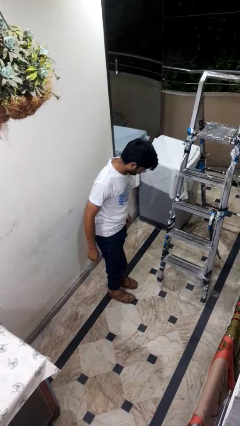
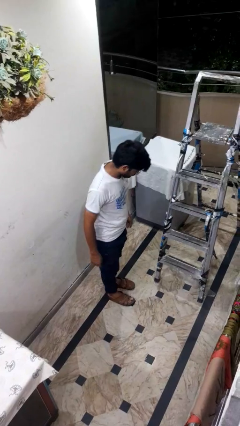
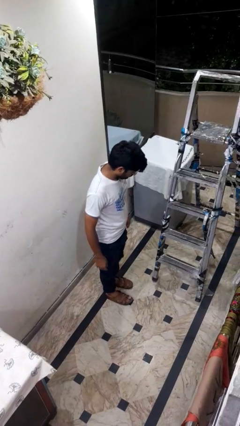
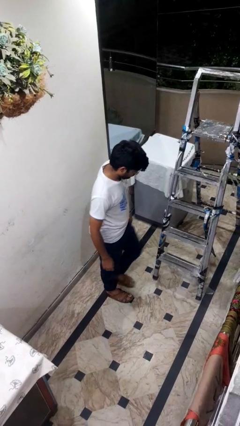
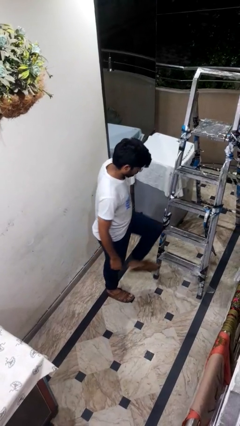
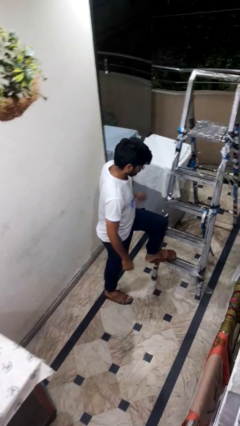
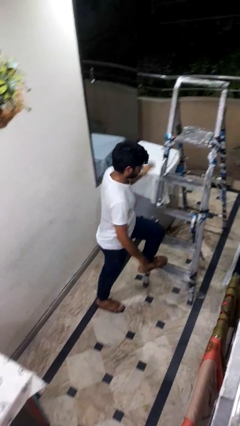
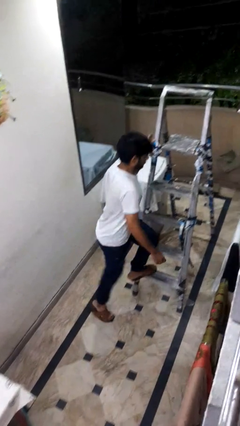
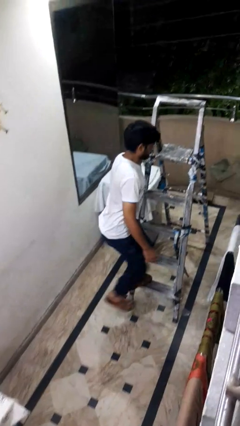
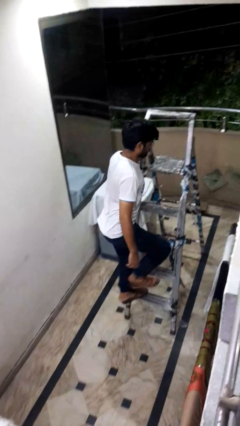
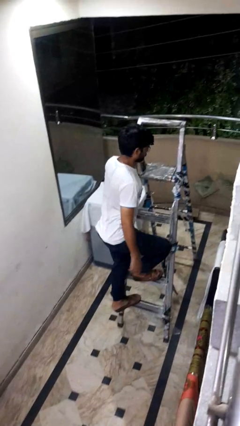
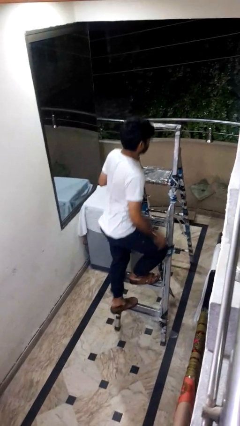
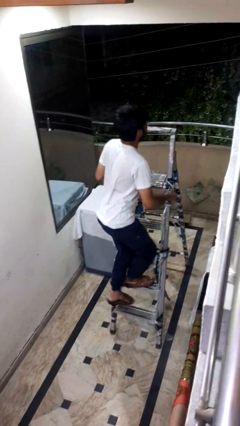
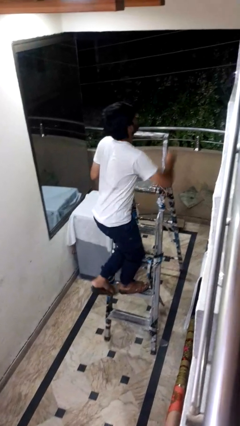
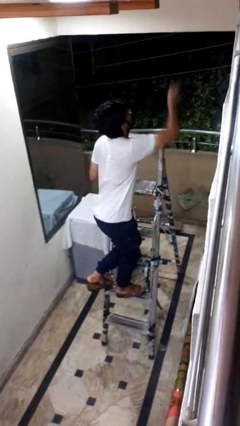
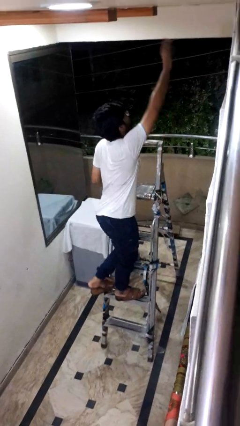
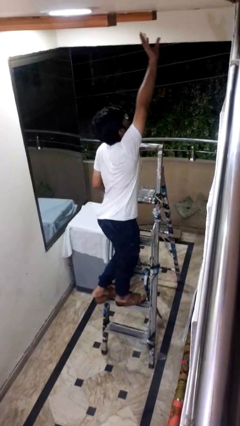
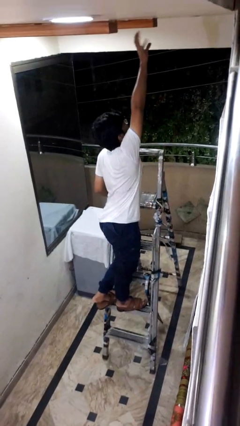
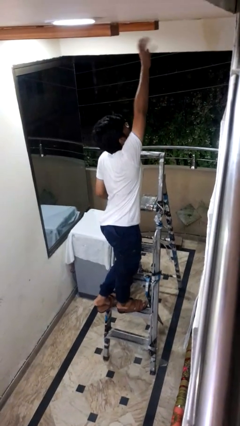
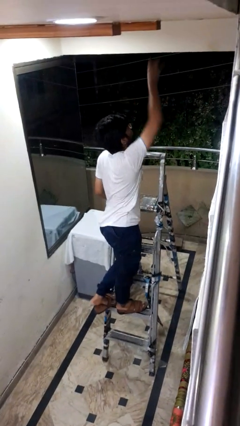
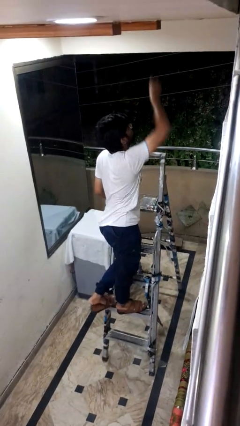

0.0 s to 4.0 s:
person climbs up ladder

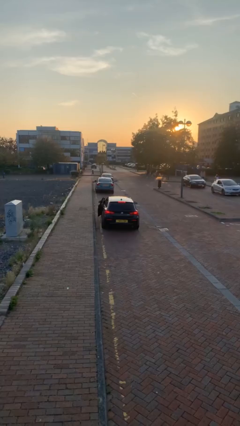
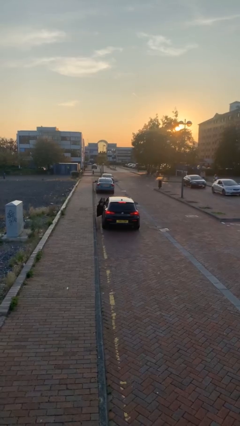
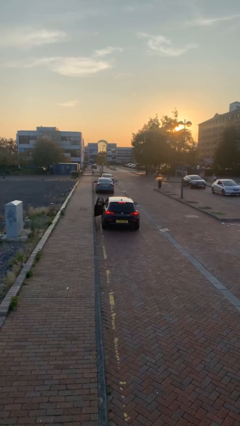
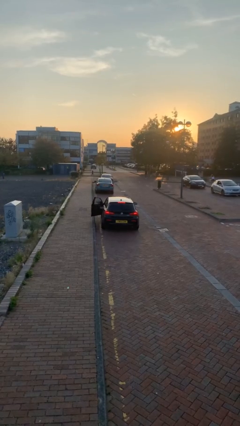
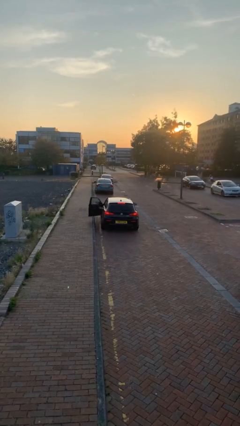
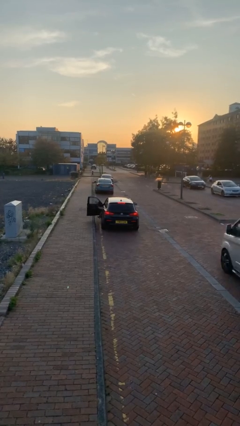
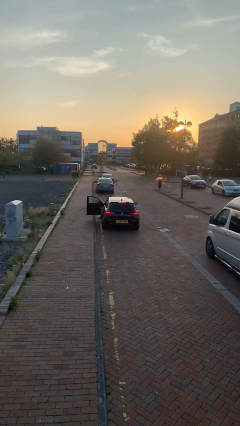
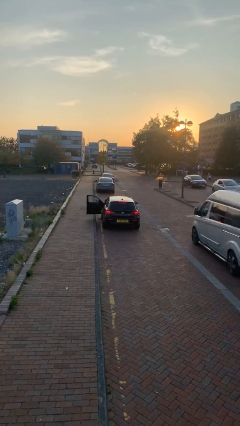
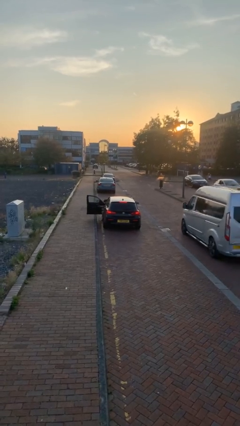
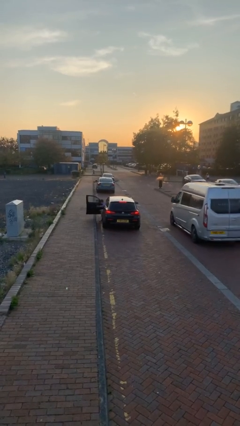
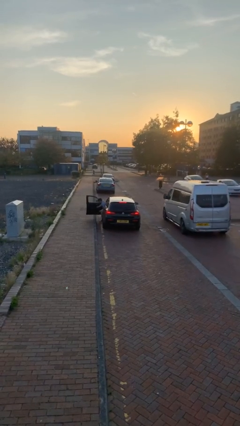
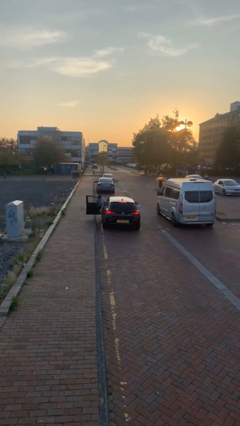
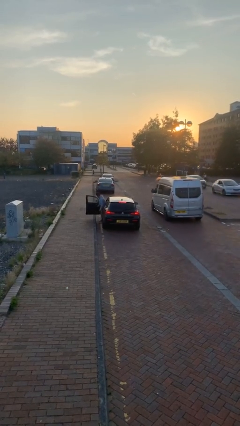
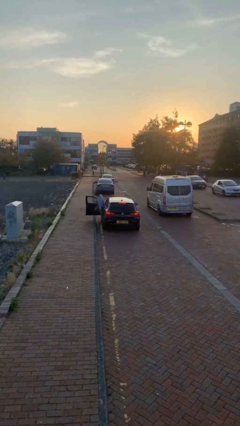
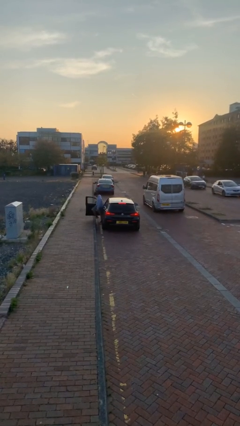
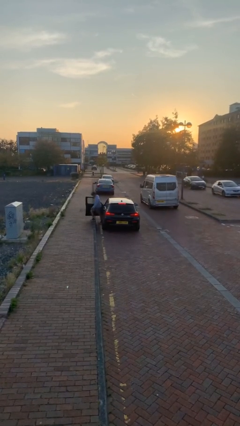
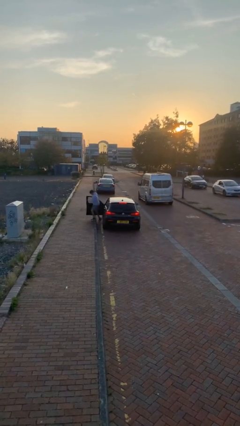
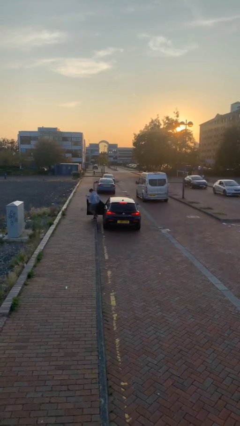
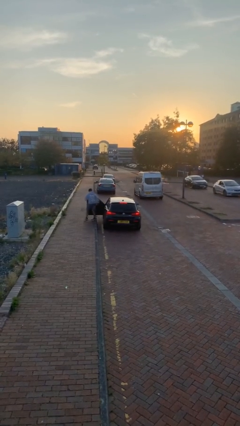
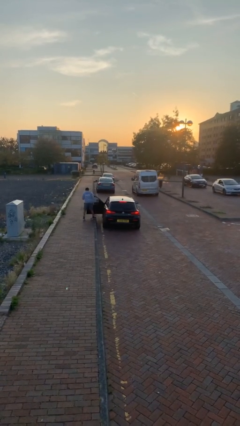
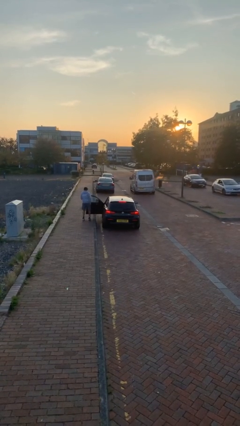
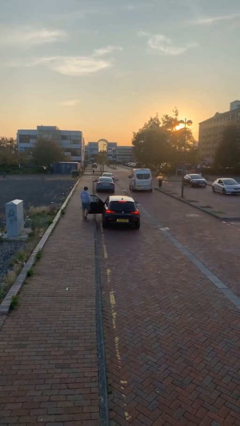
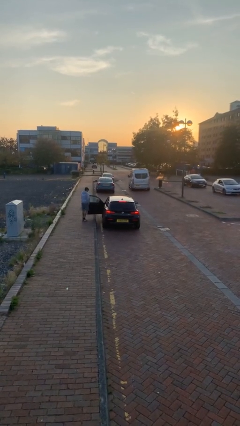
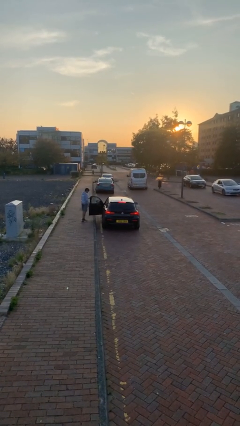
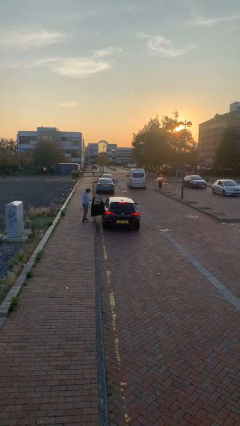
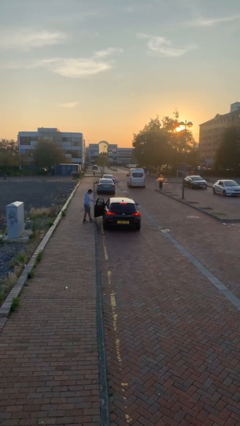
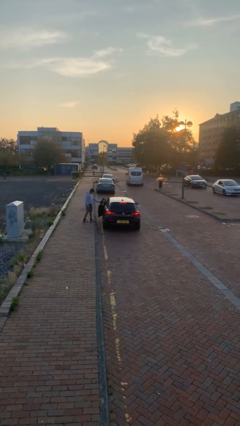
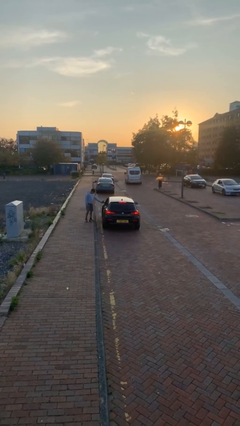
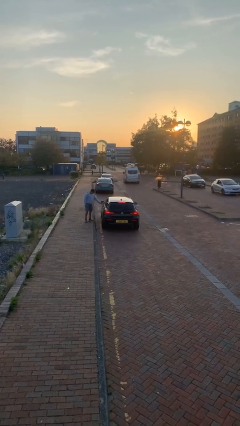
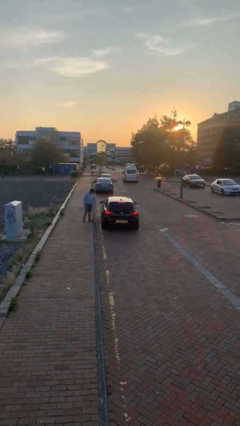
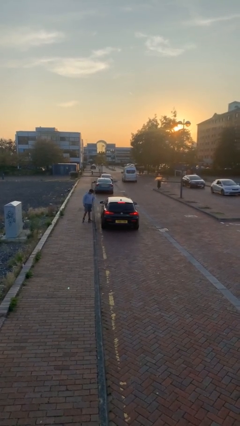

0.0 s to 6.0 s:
car drops off person

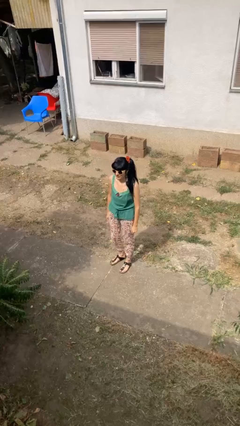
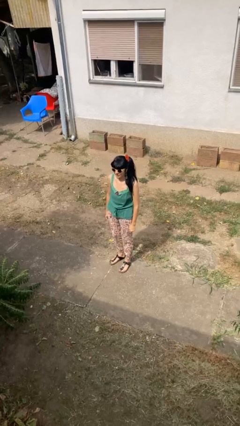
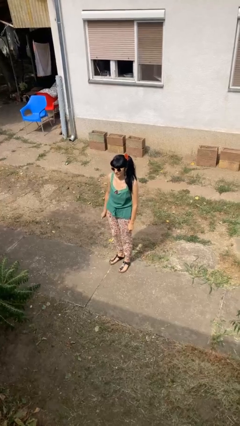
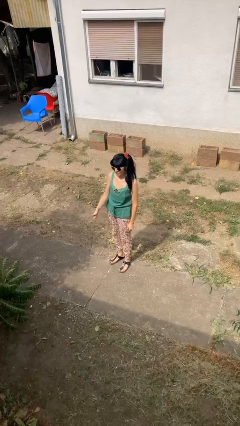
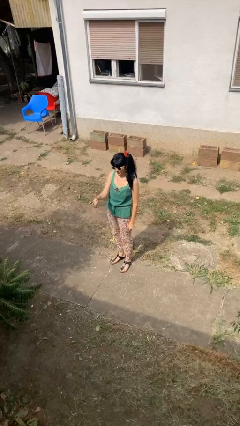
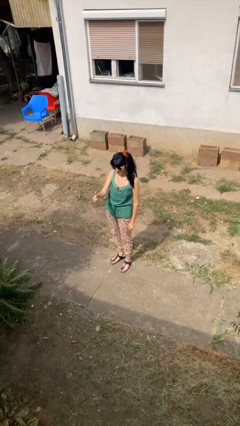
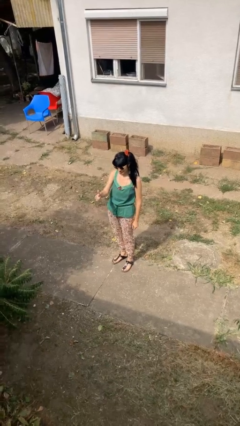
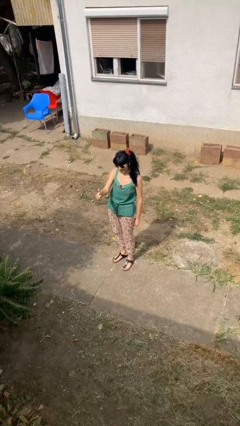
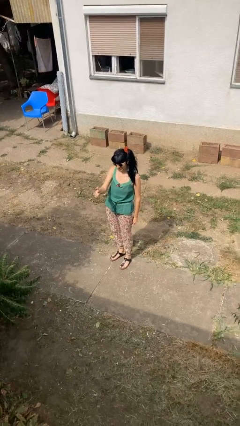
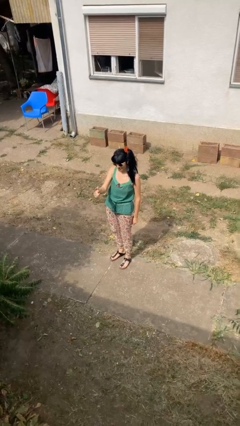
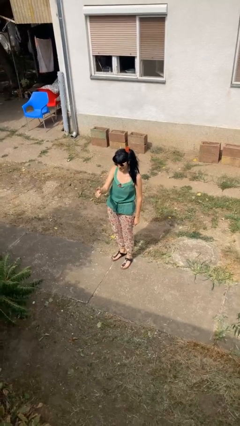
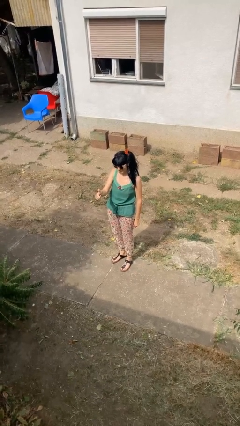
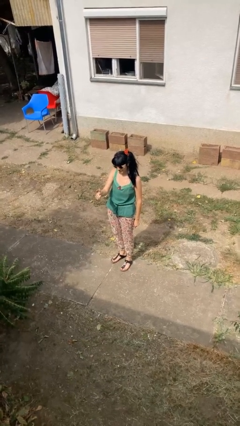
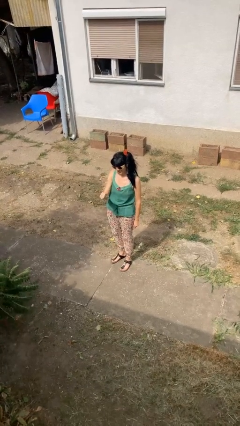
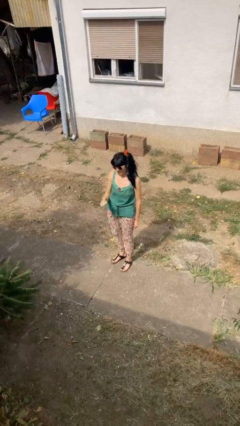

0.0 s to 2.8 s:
person gestures thumbs up

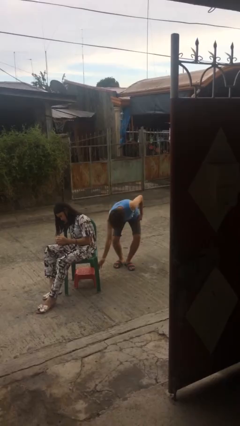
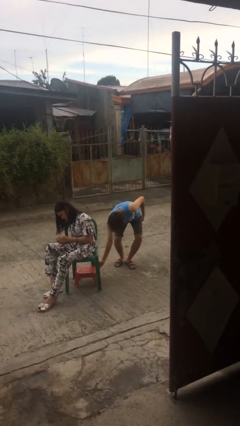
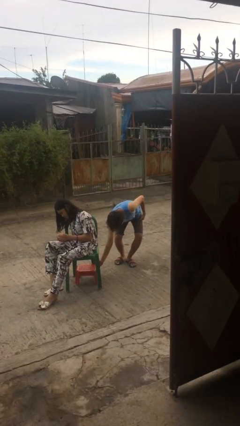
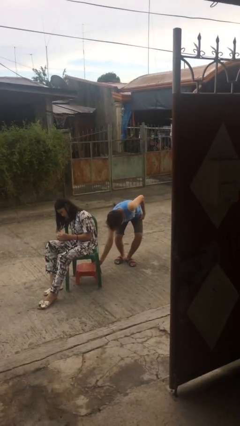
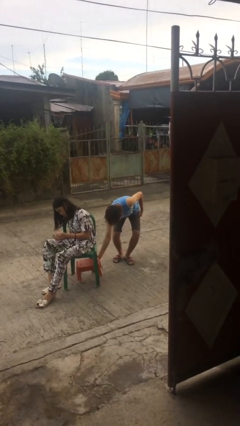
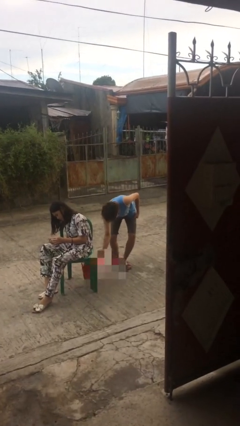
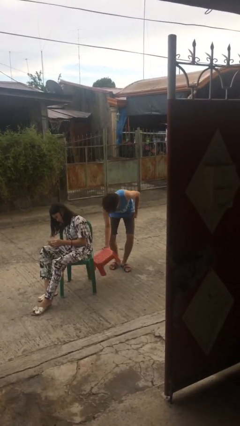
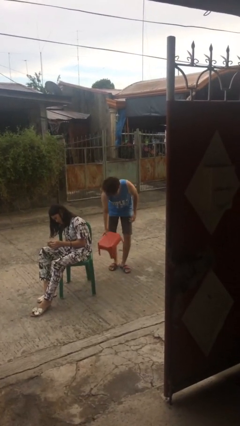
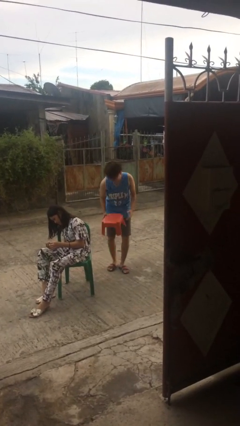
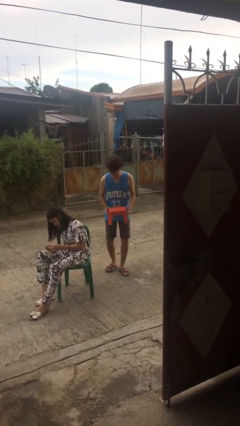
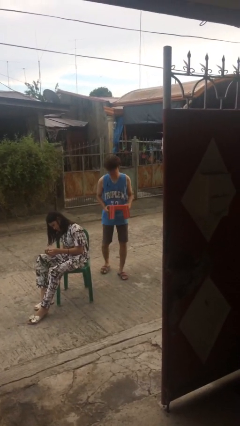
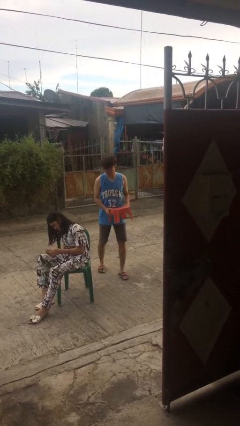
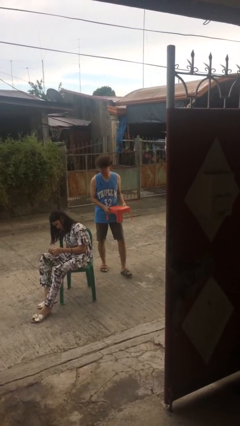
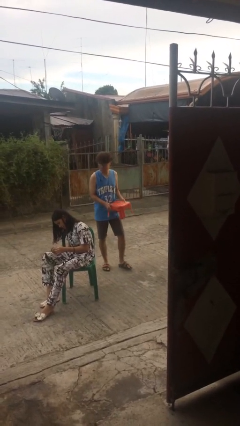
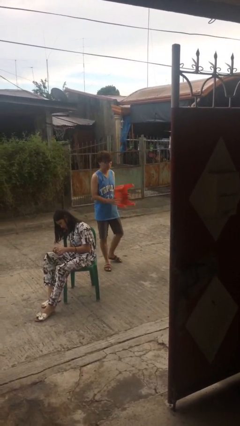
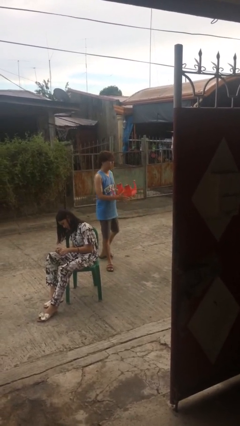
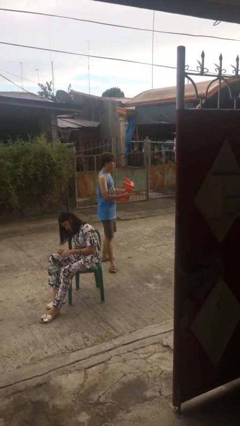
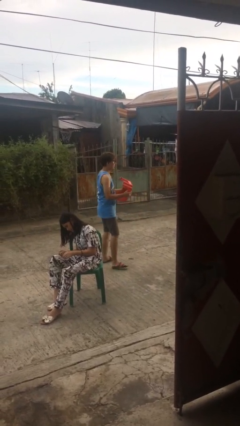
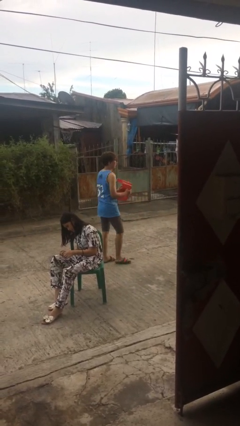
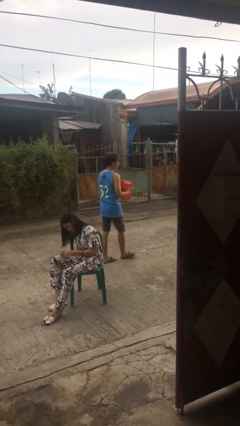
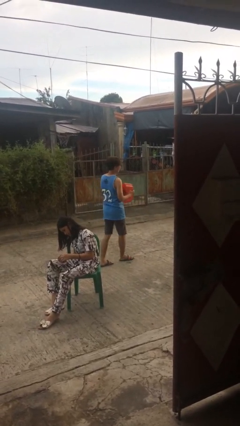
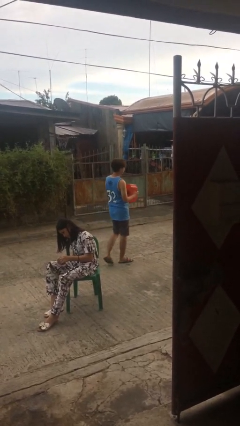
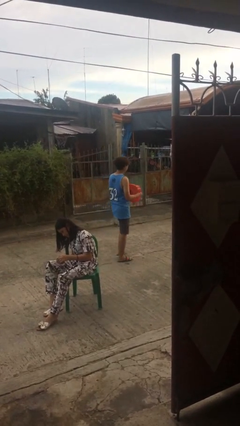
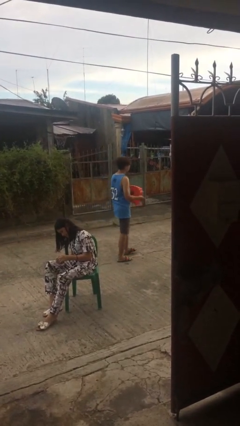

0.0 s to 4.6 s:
person steals object from person

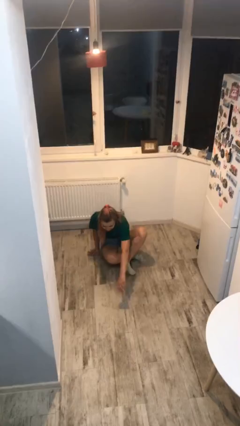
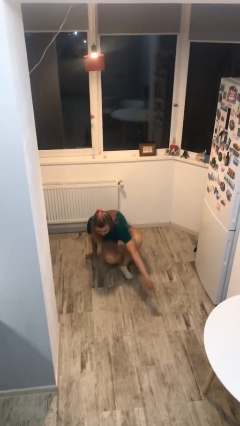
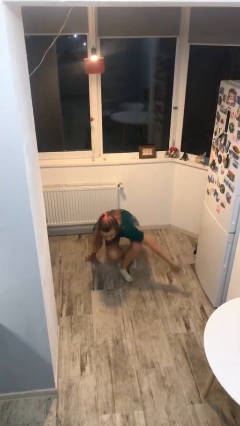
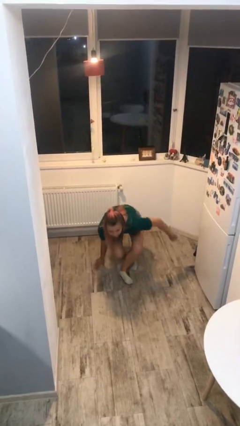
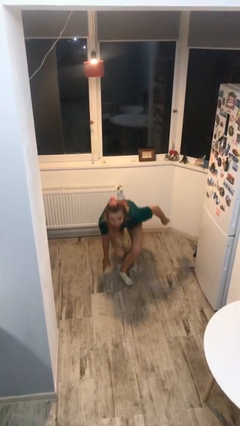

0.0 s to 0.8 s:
person stands up from floor
